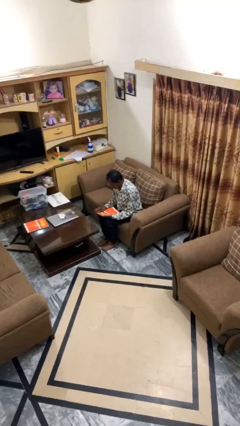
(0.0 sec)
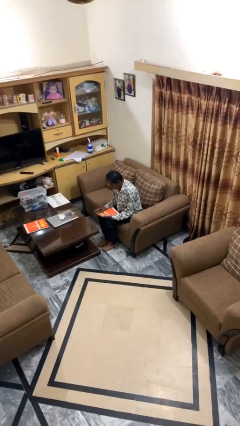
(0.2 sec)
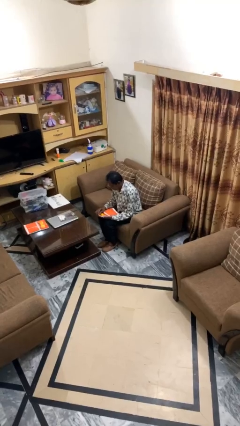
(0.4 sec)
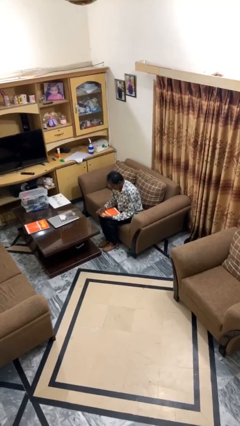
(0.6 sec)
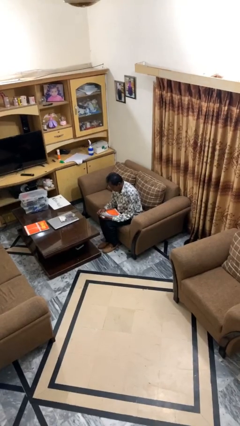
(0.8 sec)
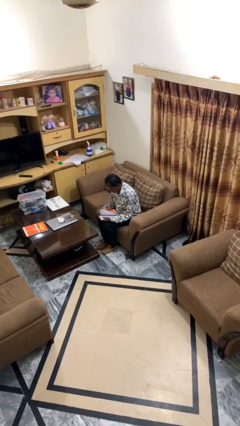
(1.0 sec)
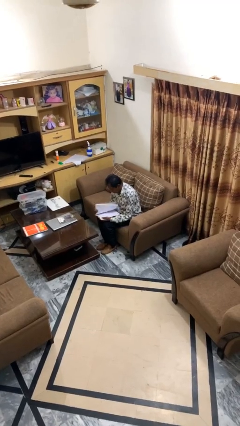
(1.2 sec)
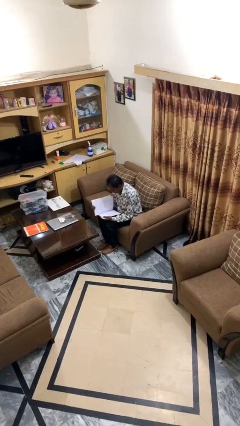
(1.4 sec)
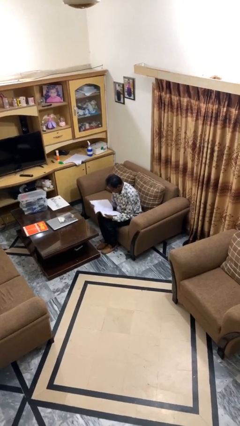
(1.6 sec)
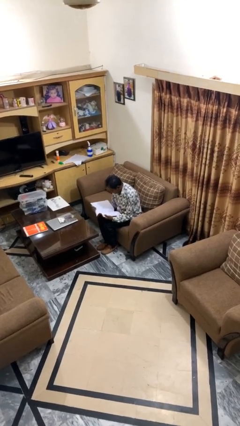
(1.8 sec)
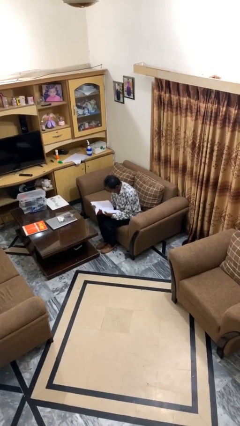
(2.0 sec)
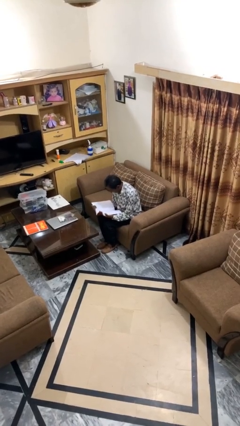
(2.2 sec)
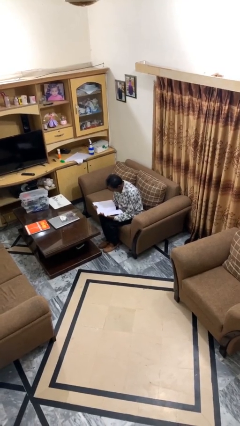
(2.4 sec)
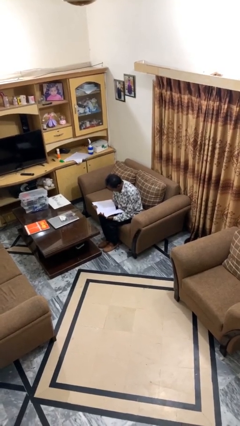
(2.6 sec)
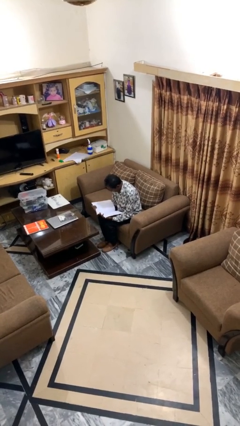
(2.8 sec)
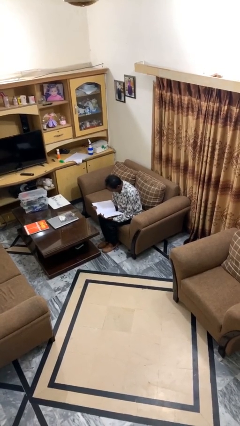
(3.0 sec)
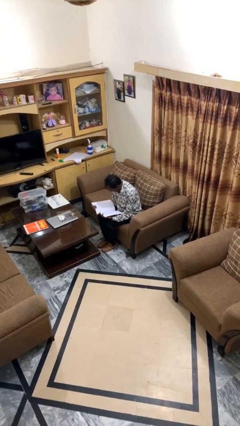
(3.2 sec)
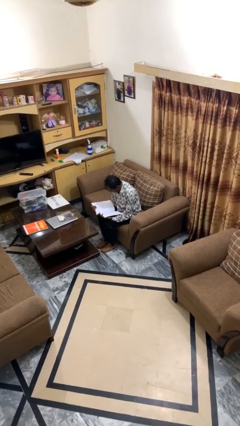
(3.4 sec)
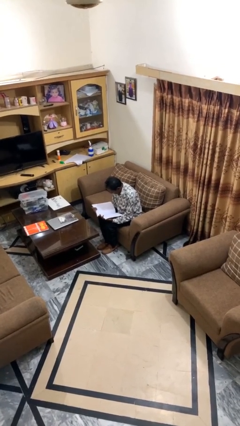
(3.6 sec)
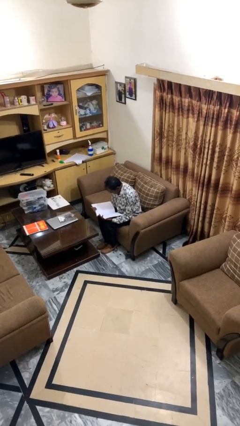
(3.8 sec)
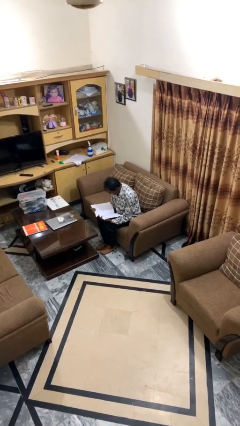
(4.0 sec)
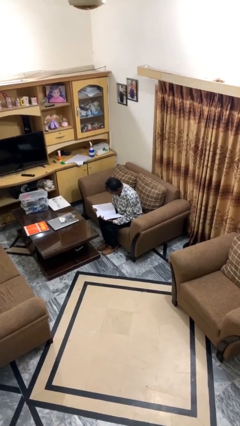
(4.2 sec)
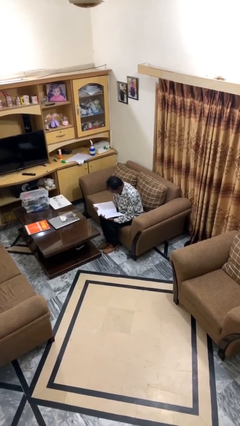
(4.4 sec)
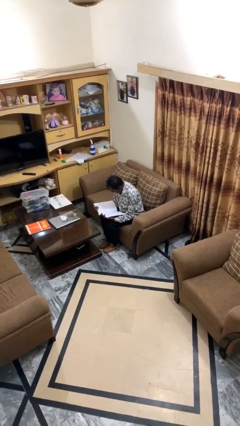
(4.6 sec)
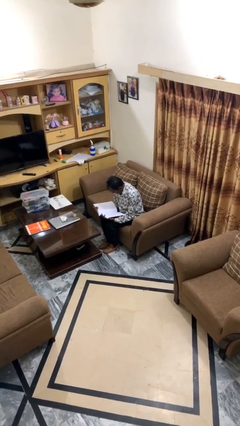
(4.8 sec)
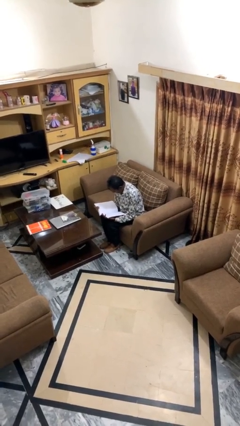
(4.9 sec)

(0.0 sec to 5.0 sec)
person reads document

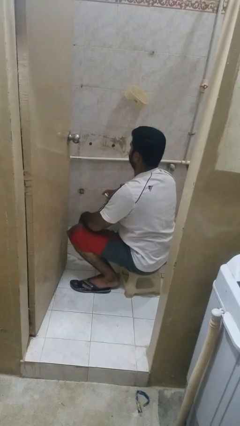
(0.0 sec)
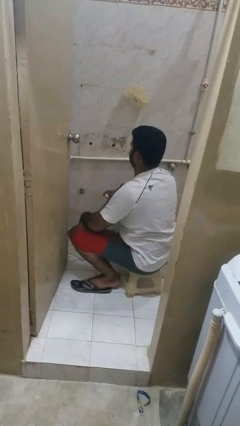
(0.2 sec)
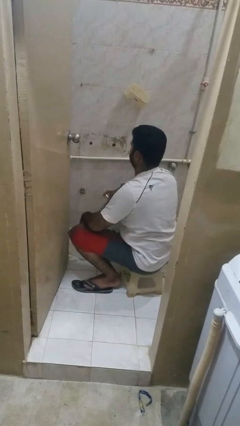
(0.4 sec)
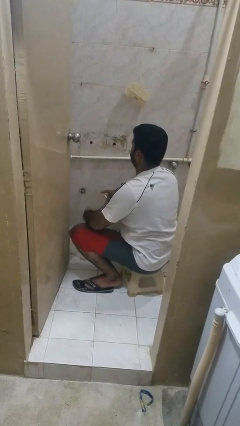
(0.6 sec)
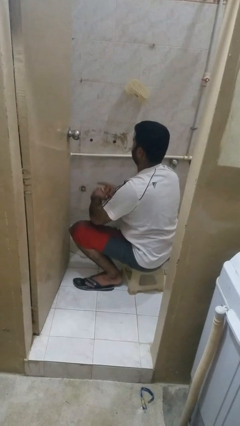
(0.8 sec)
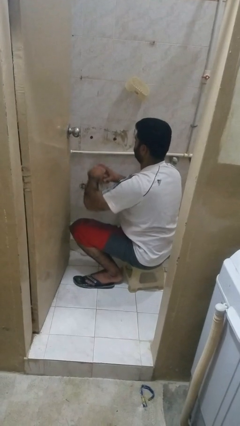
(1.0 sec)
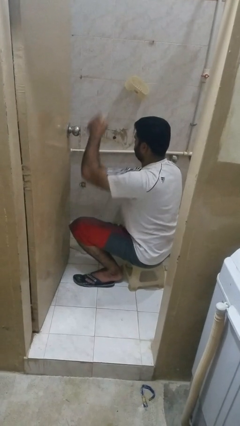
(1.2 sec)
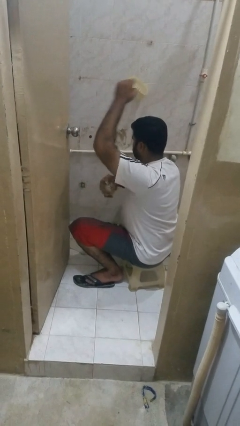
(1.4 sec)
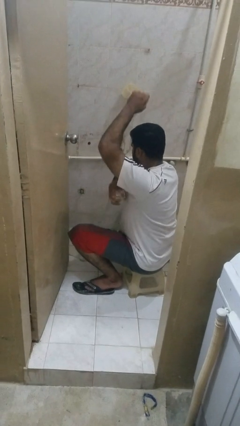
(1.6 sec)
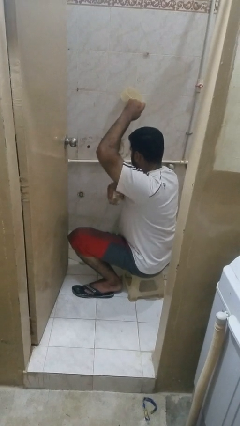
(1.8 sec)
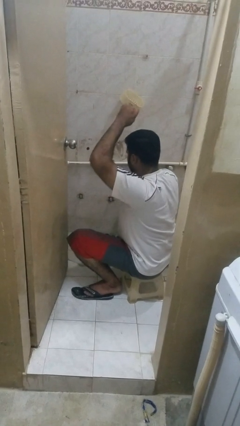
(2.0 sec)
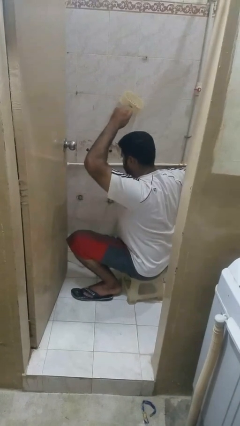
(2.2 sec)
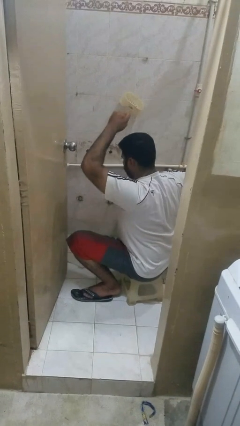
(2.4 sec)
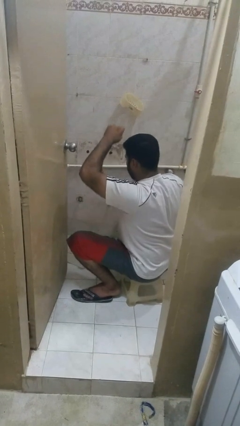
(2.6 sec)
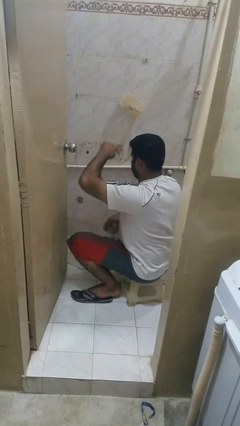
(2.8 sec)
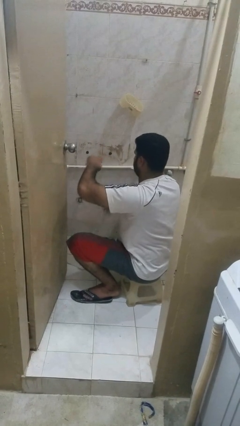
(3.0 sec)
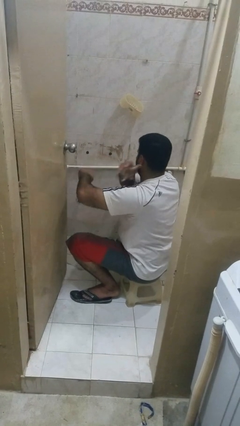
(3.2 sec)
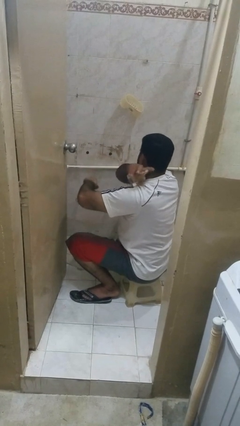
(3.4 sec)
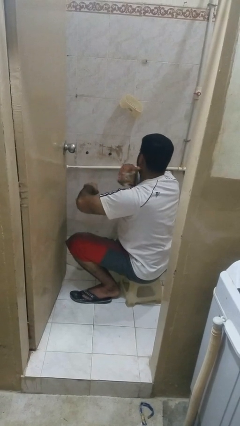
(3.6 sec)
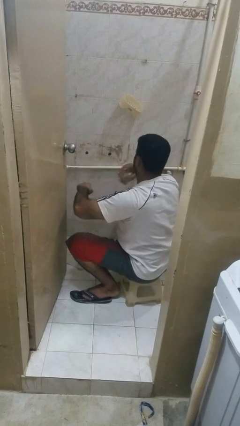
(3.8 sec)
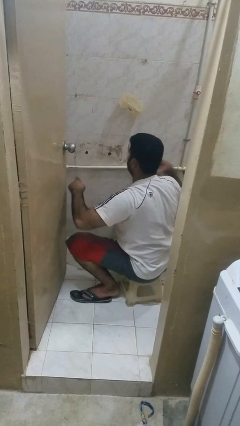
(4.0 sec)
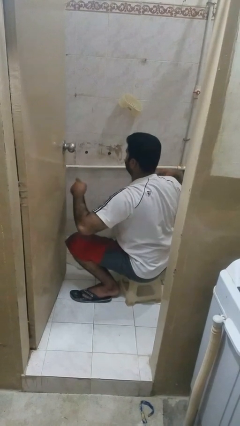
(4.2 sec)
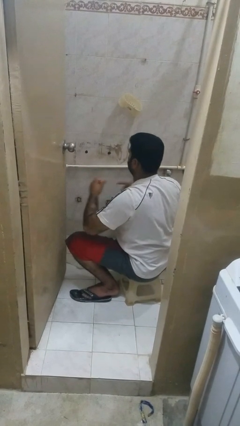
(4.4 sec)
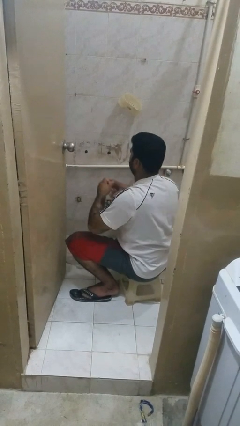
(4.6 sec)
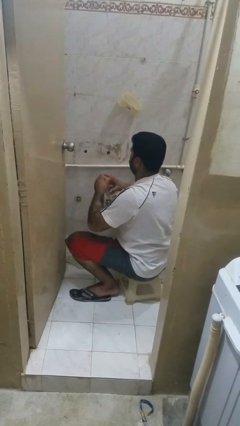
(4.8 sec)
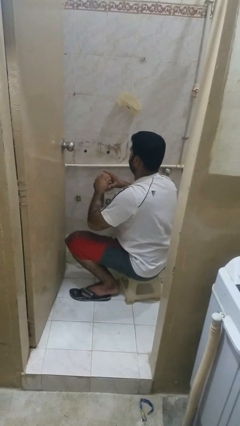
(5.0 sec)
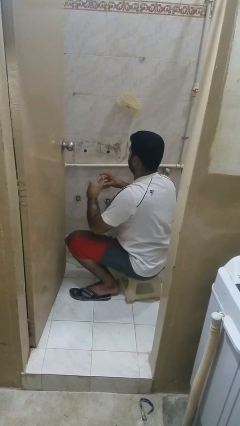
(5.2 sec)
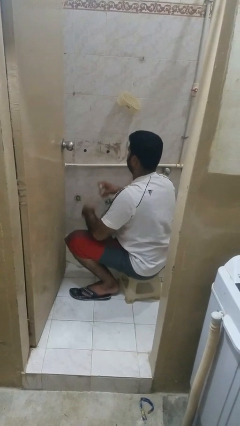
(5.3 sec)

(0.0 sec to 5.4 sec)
person applies deodorant

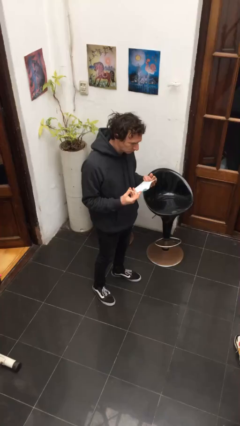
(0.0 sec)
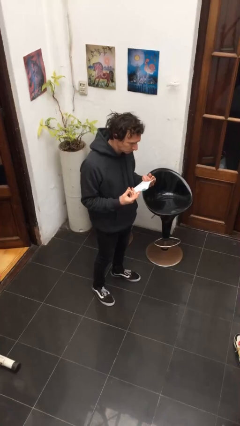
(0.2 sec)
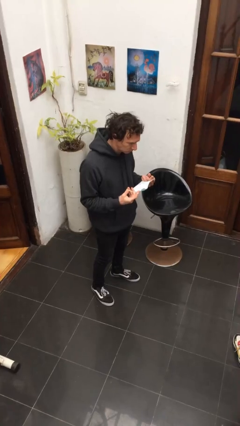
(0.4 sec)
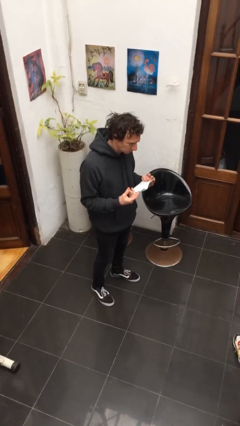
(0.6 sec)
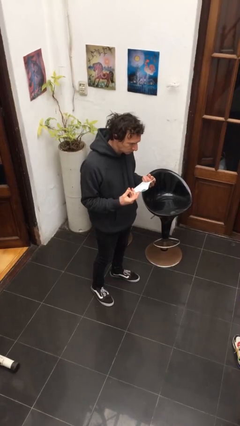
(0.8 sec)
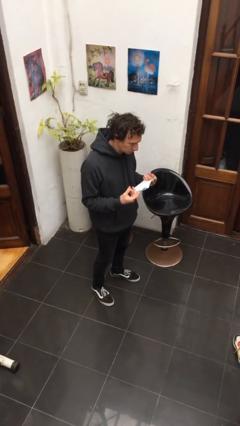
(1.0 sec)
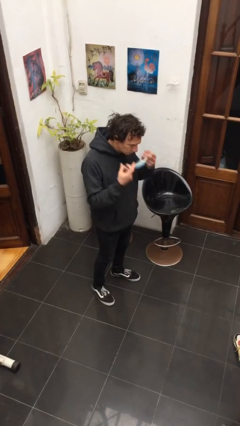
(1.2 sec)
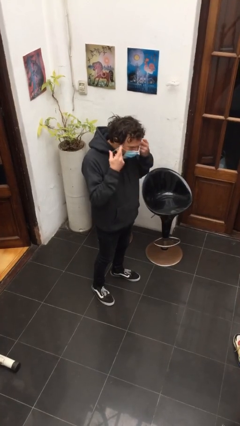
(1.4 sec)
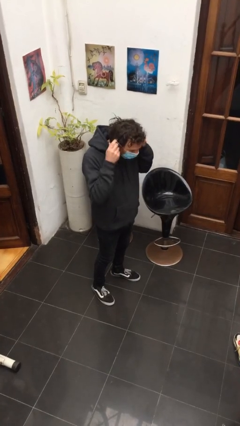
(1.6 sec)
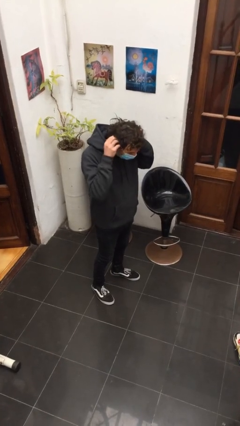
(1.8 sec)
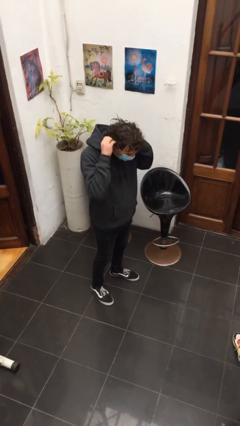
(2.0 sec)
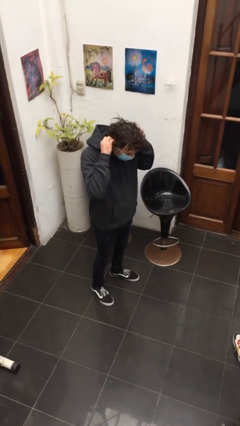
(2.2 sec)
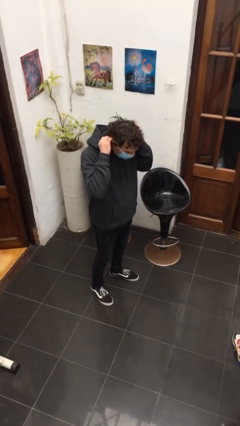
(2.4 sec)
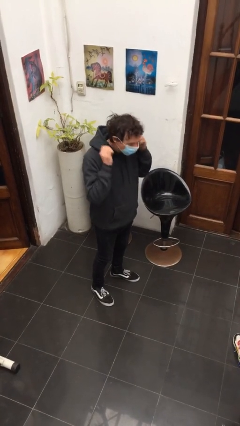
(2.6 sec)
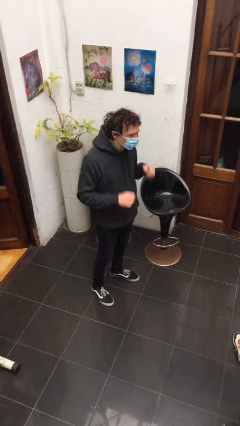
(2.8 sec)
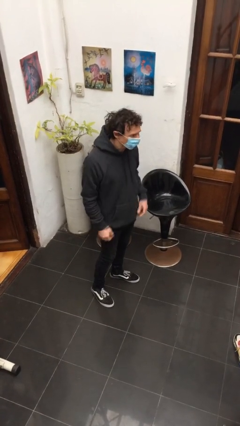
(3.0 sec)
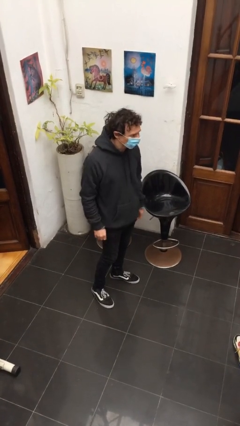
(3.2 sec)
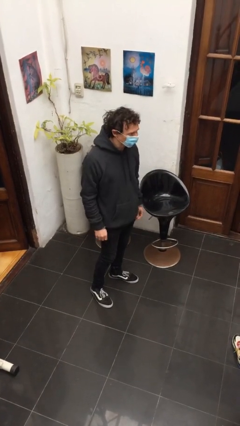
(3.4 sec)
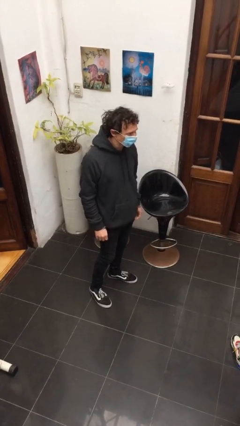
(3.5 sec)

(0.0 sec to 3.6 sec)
person puts on facemask

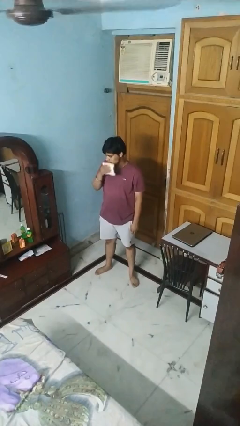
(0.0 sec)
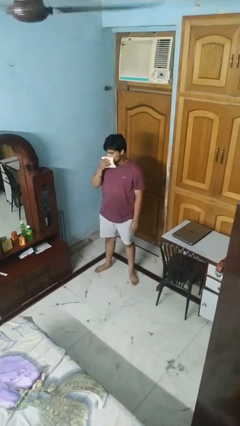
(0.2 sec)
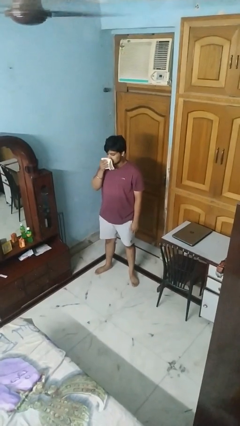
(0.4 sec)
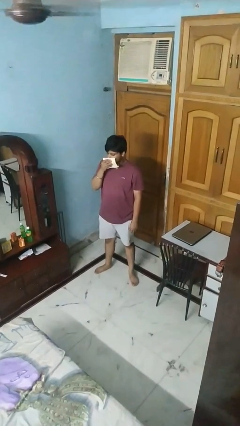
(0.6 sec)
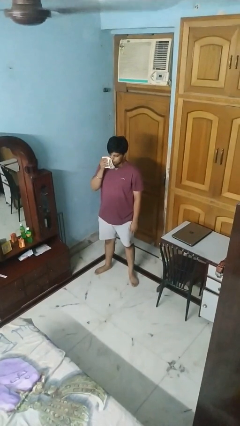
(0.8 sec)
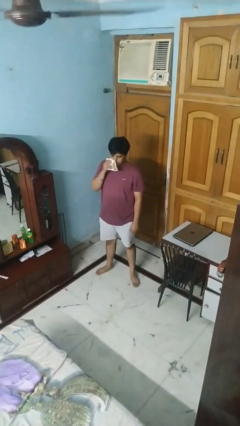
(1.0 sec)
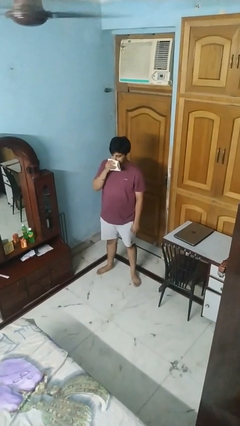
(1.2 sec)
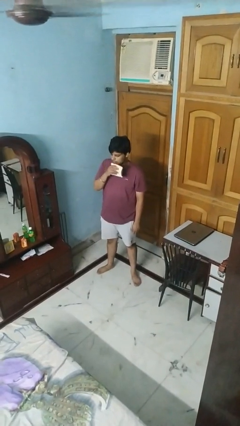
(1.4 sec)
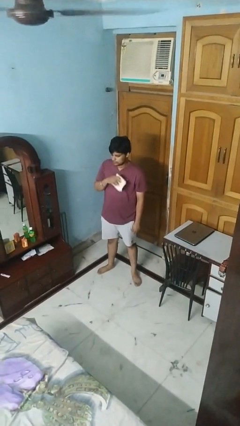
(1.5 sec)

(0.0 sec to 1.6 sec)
person wipes mouth with napkin

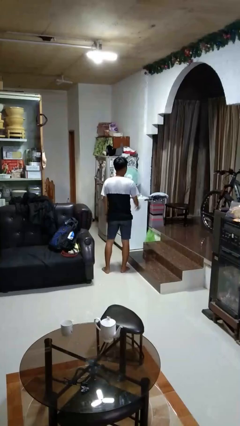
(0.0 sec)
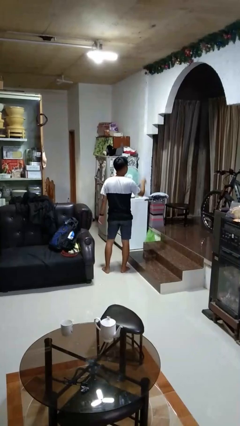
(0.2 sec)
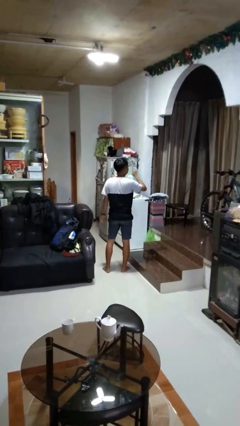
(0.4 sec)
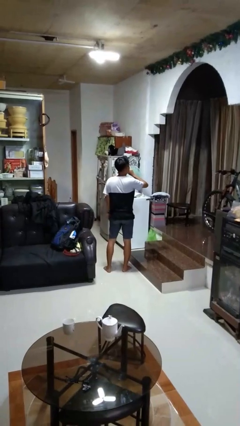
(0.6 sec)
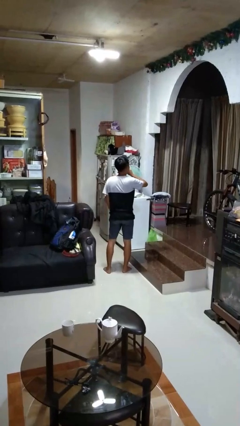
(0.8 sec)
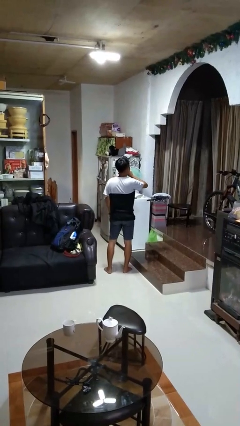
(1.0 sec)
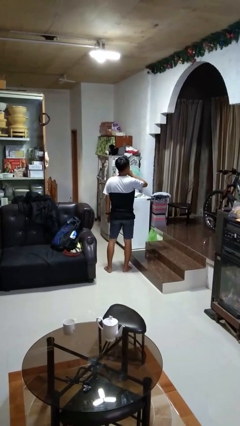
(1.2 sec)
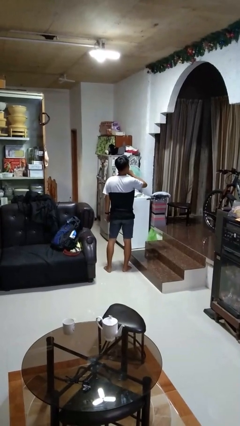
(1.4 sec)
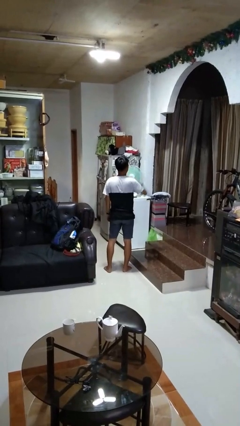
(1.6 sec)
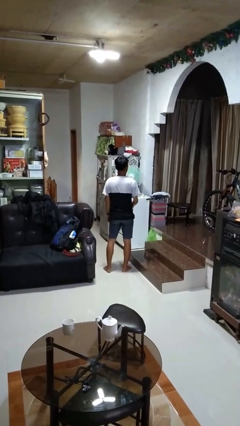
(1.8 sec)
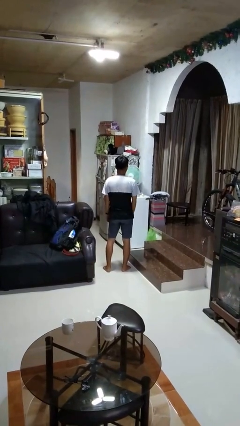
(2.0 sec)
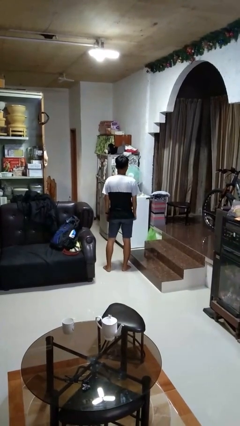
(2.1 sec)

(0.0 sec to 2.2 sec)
person gestures be quiet
